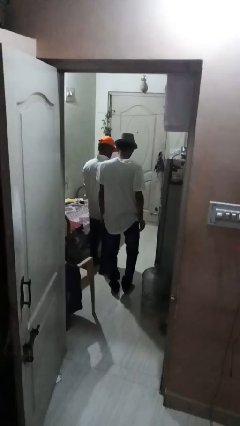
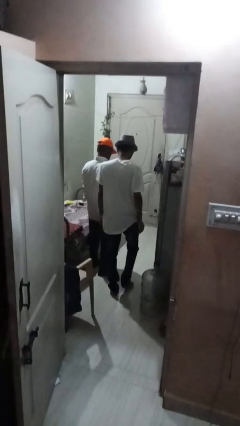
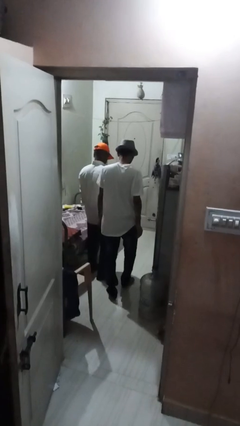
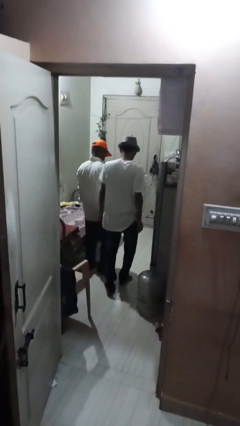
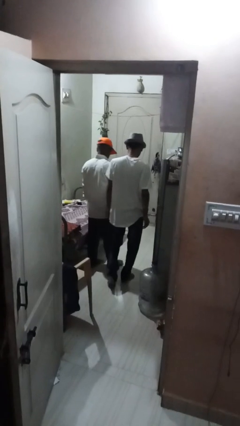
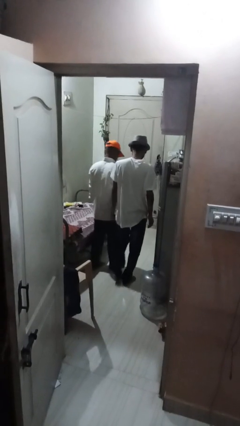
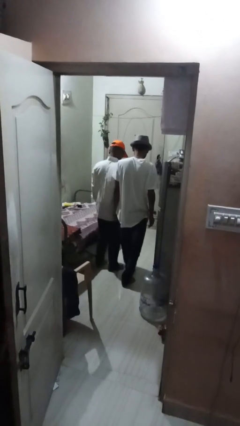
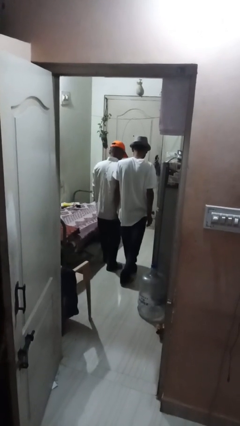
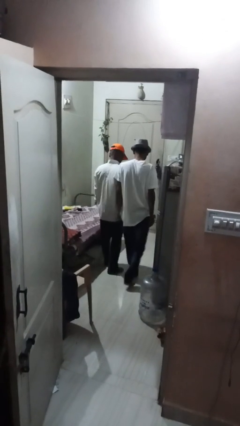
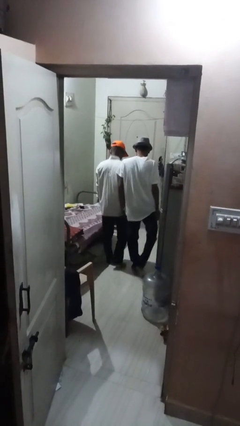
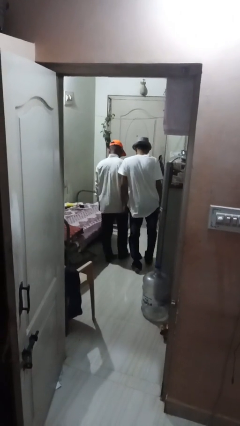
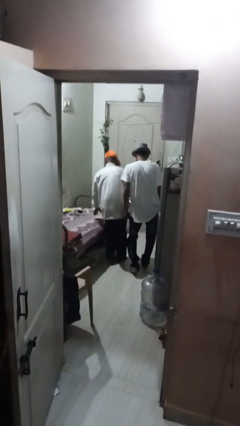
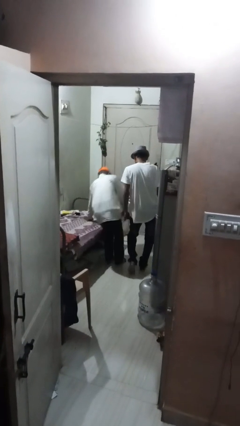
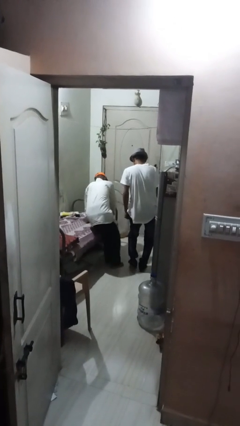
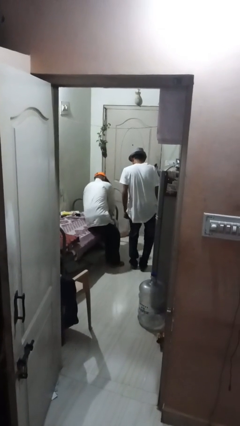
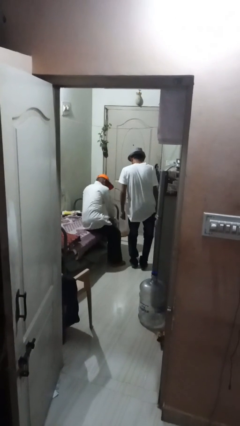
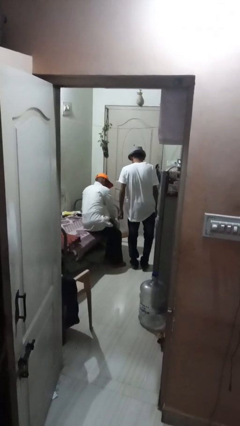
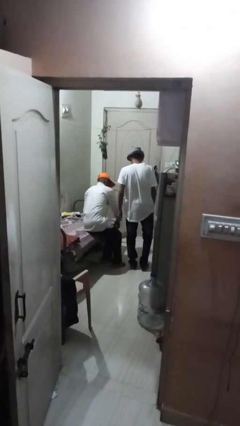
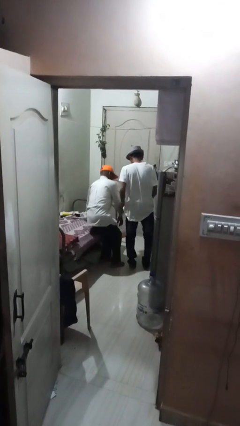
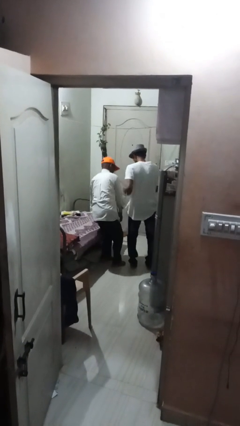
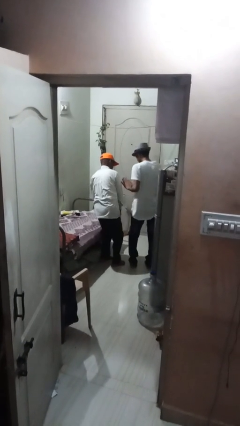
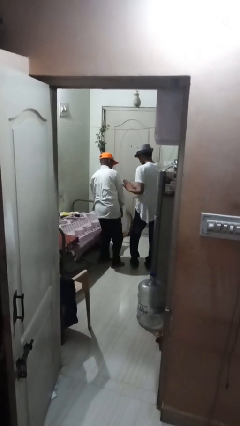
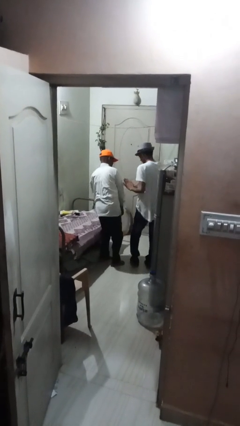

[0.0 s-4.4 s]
person bumps into person

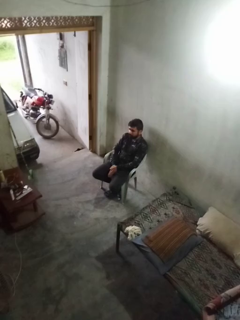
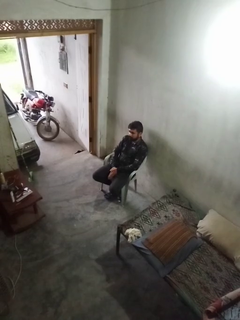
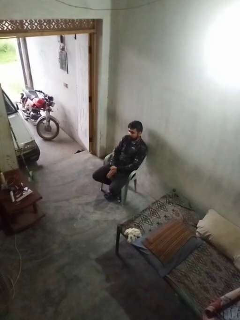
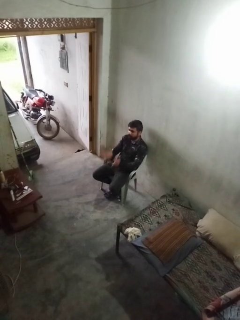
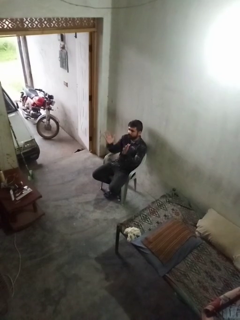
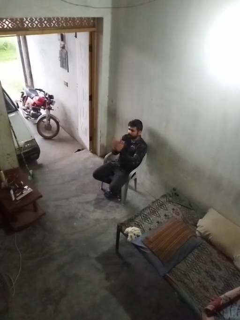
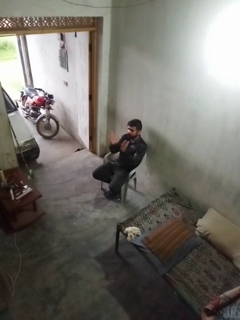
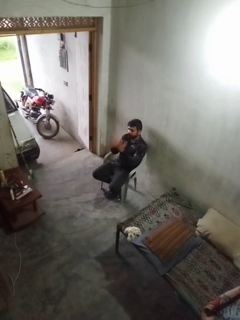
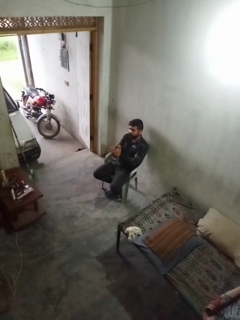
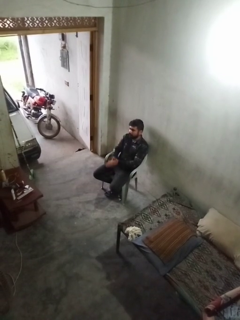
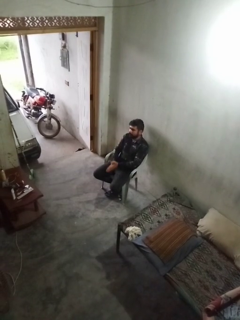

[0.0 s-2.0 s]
person claps hands

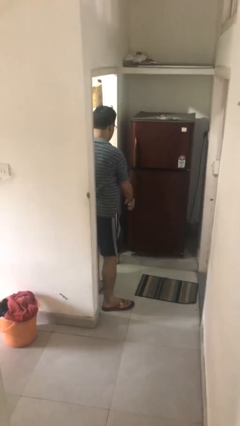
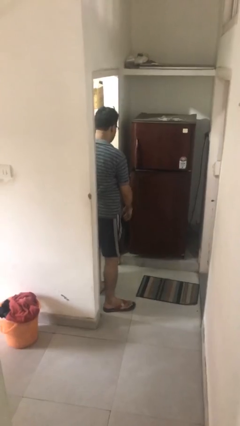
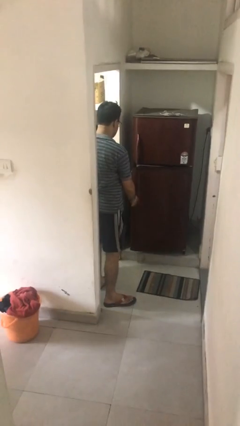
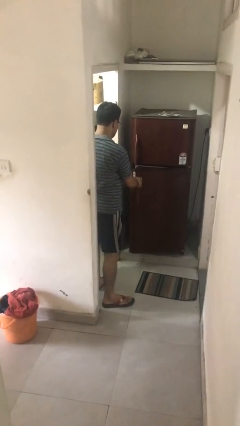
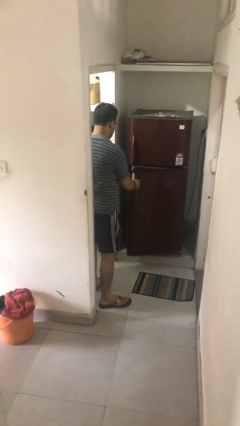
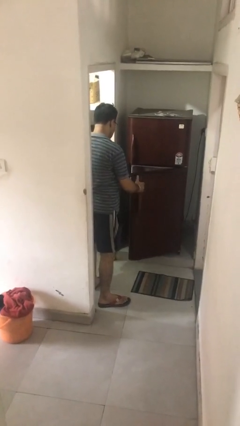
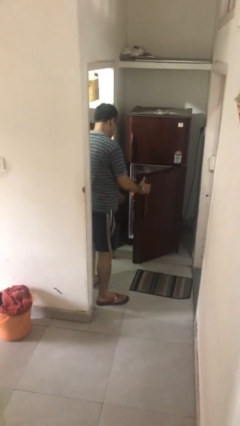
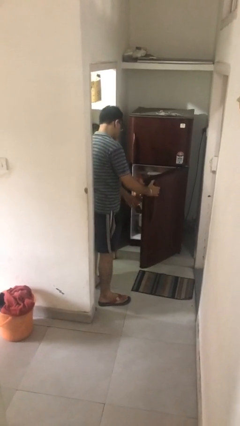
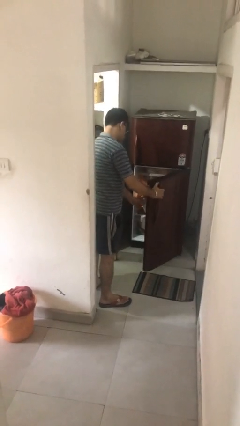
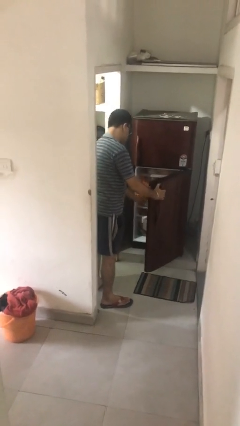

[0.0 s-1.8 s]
person opens refrigerator

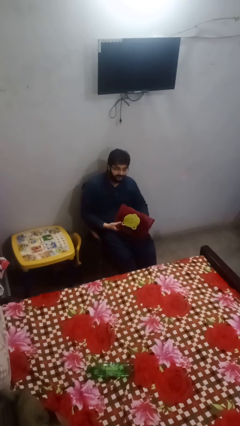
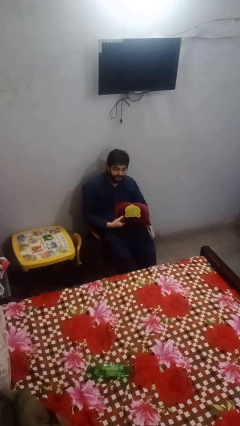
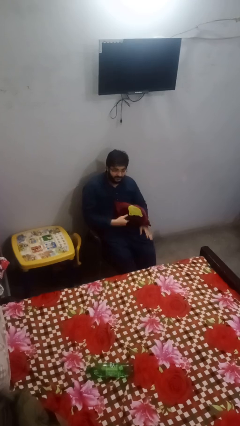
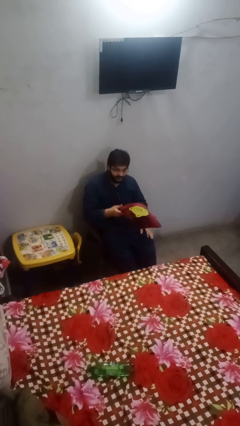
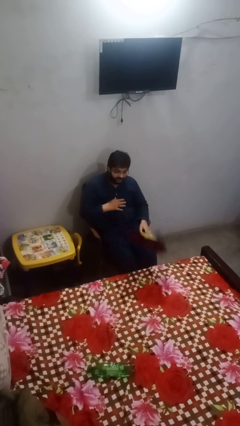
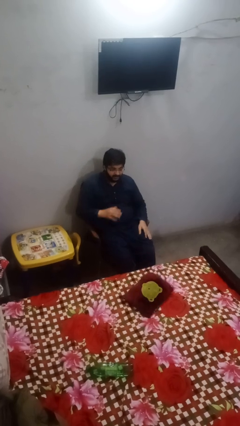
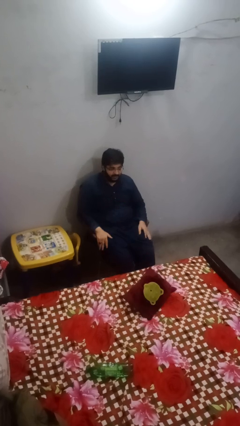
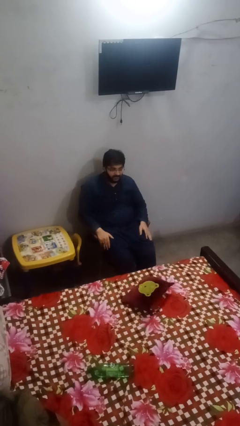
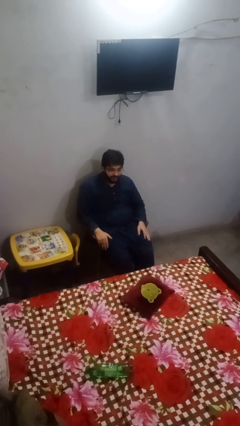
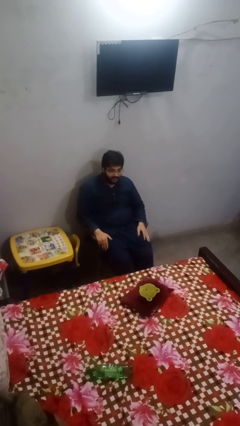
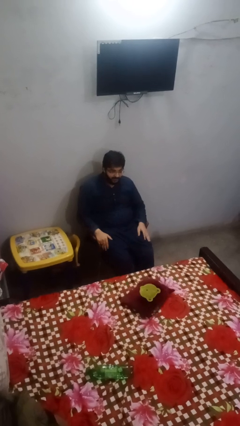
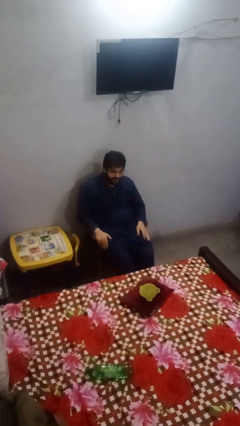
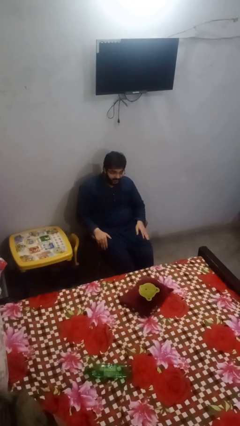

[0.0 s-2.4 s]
person throws object on bed

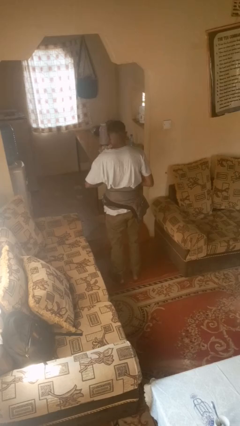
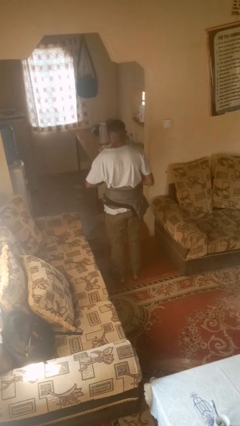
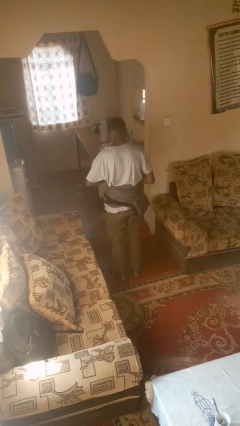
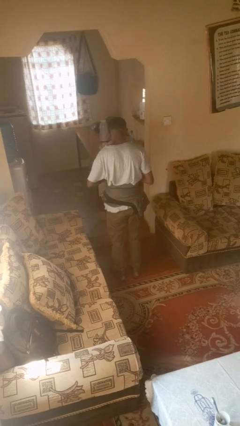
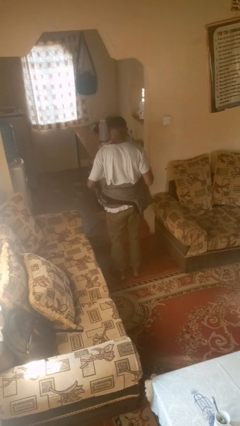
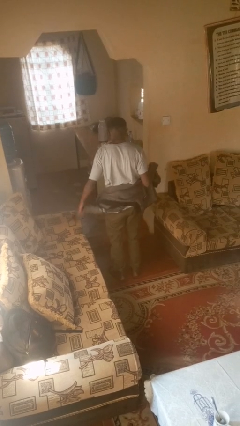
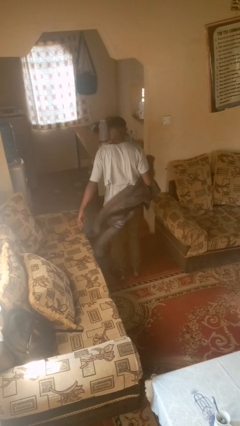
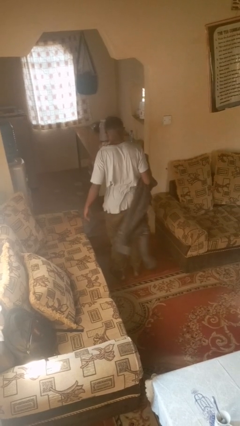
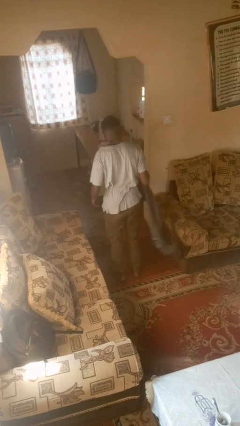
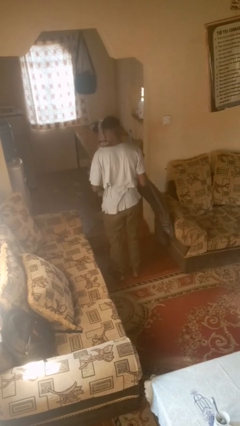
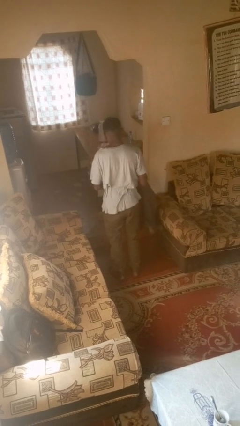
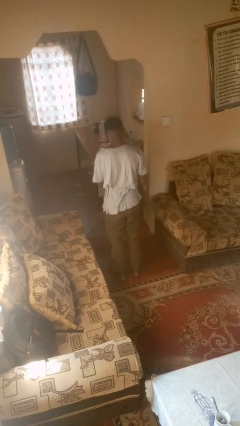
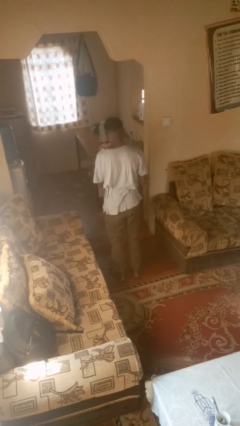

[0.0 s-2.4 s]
person unties jacket around waist

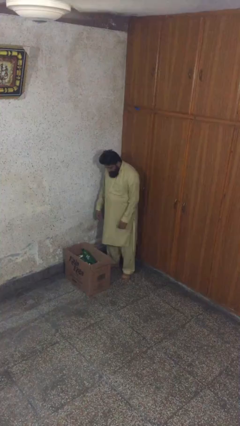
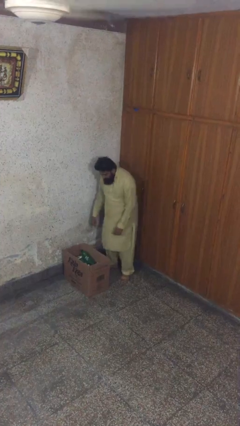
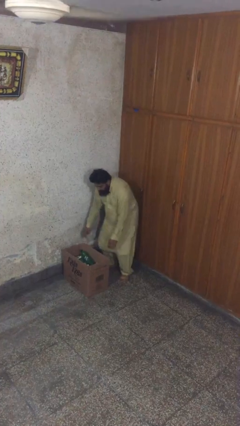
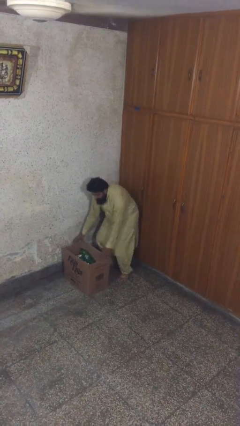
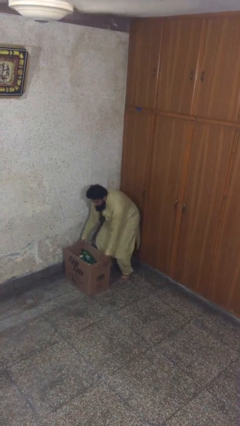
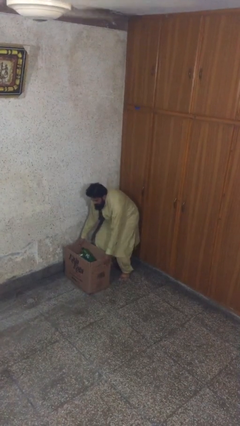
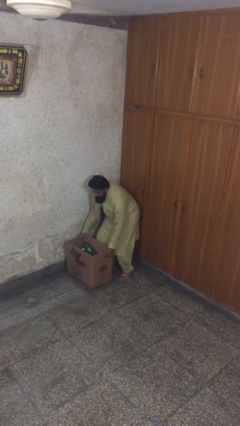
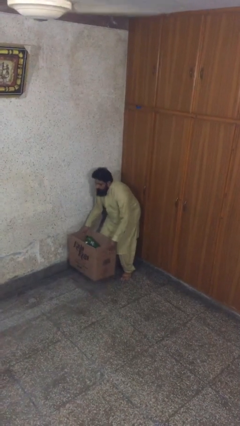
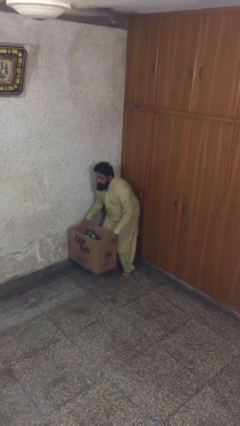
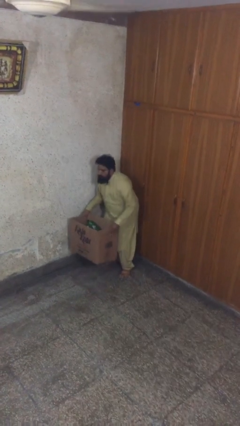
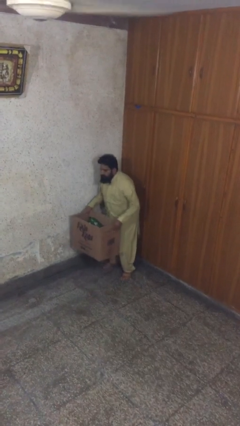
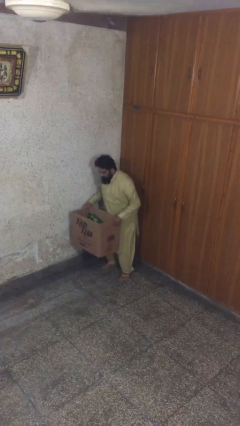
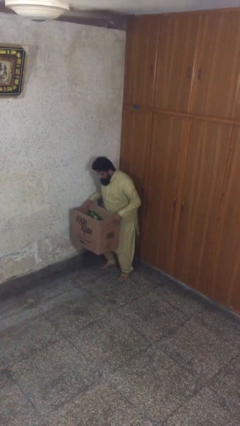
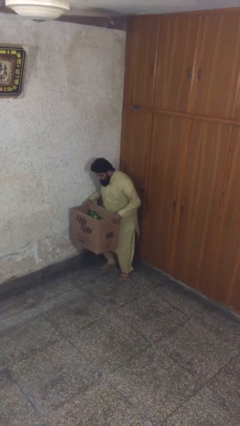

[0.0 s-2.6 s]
person picks up object from floor

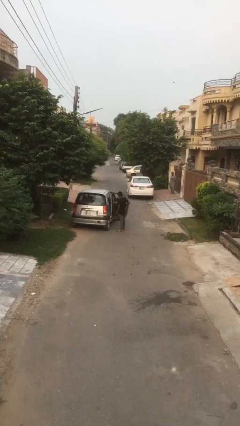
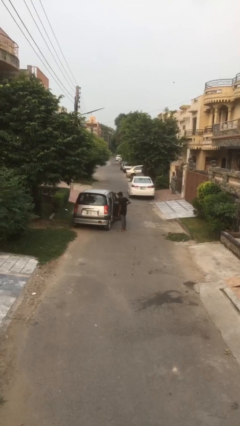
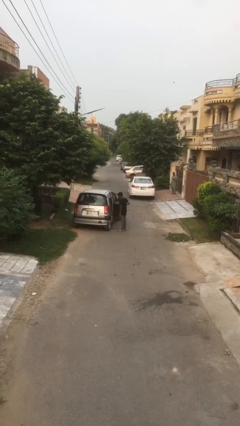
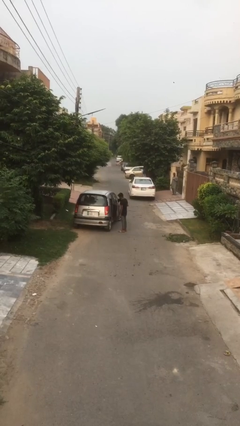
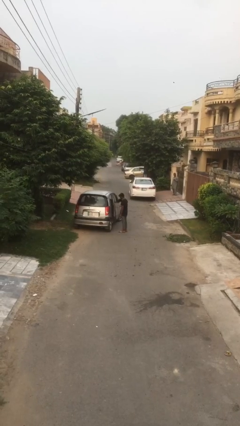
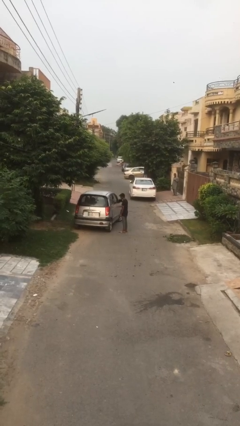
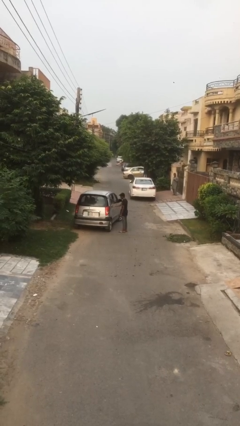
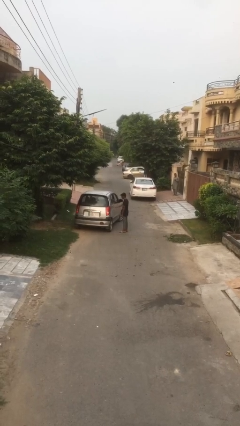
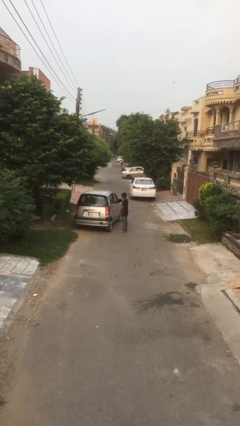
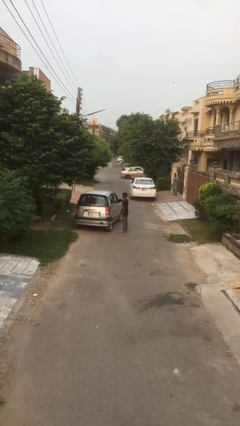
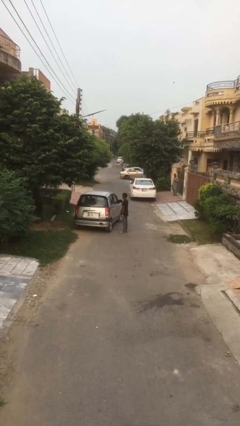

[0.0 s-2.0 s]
person closes car door
